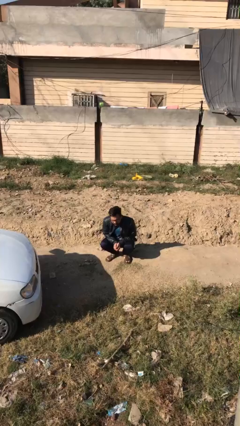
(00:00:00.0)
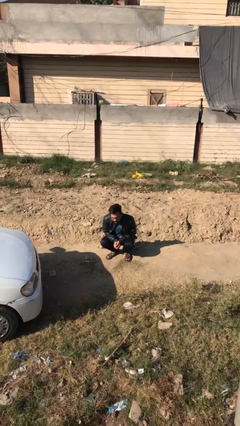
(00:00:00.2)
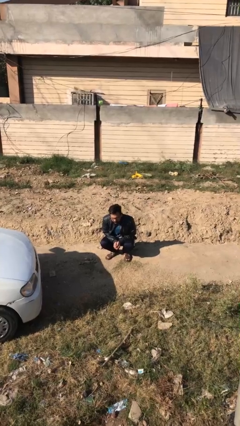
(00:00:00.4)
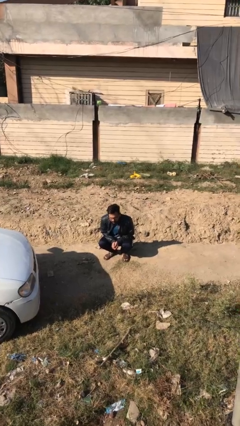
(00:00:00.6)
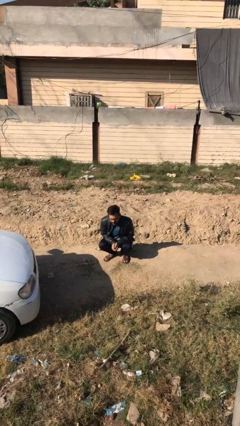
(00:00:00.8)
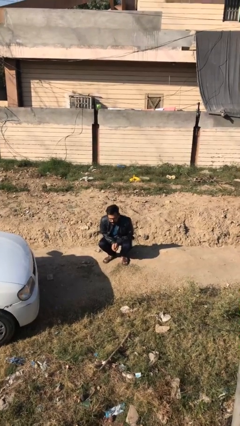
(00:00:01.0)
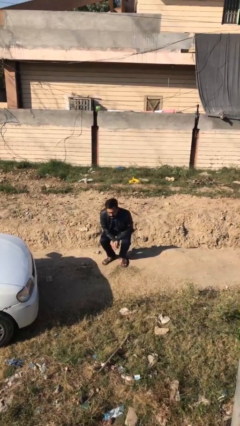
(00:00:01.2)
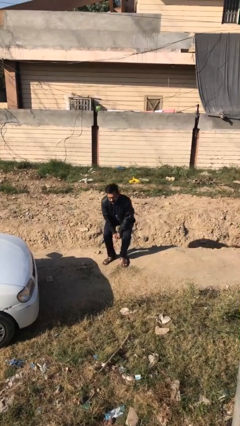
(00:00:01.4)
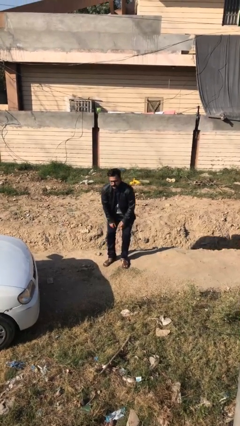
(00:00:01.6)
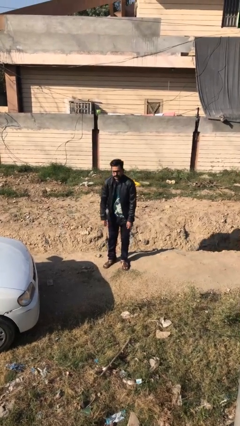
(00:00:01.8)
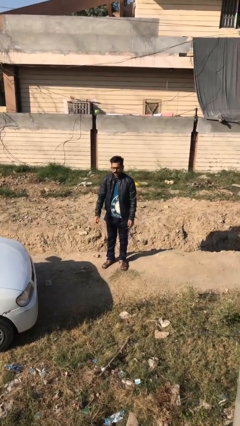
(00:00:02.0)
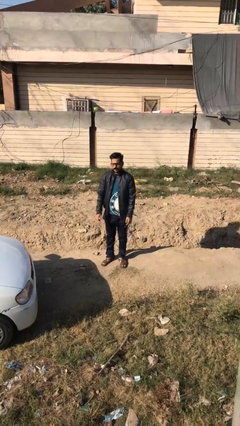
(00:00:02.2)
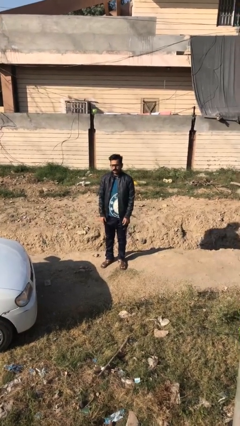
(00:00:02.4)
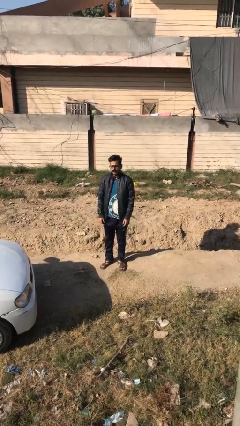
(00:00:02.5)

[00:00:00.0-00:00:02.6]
person stands up

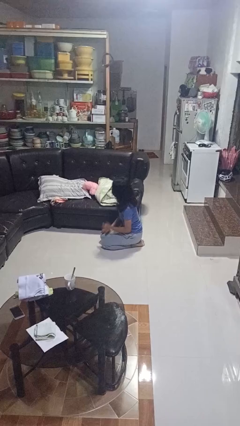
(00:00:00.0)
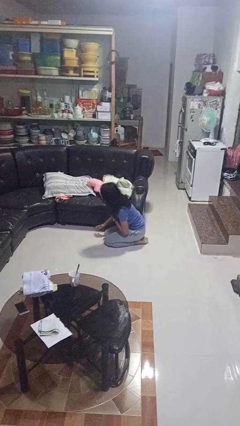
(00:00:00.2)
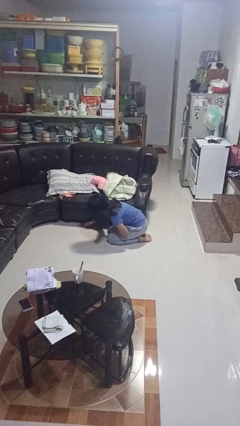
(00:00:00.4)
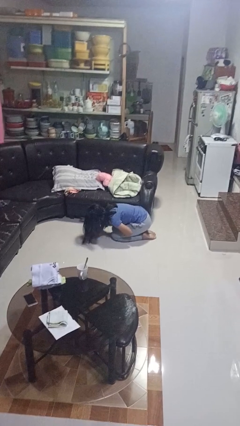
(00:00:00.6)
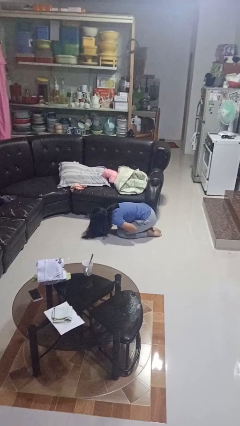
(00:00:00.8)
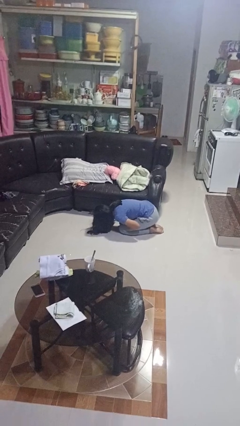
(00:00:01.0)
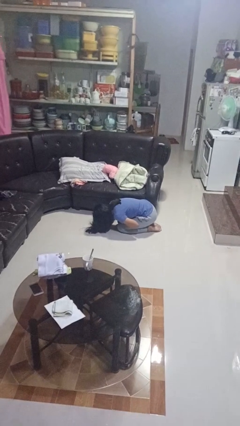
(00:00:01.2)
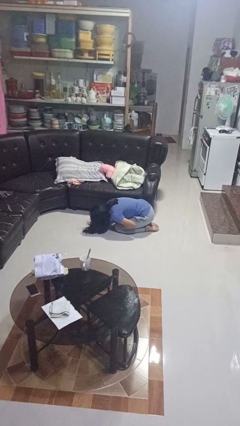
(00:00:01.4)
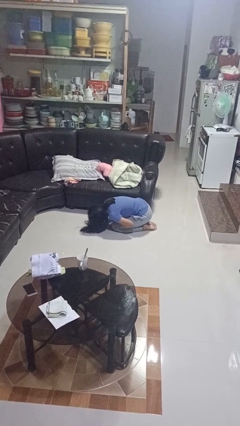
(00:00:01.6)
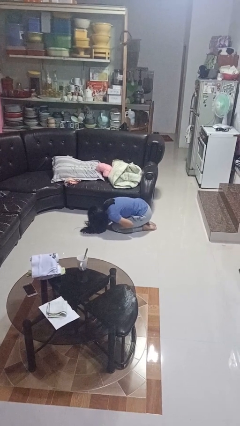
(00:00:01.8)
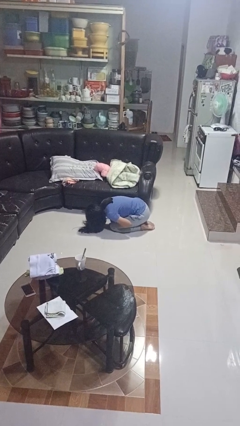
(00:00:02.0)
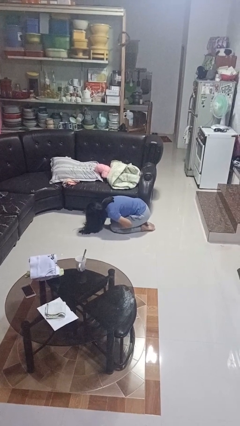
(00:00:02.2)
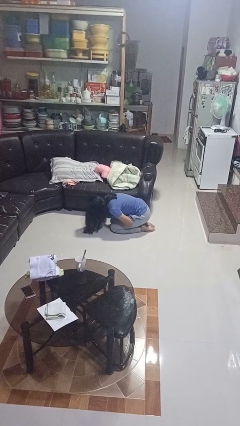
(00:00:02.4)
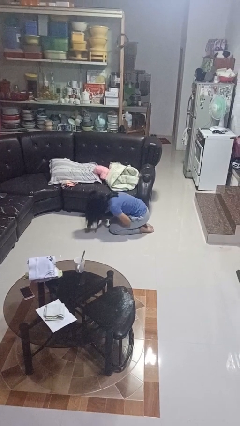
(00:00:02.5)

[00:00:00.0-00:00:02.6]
person searches under couch

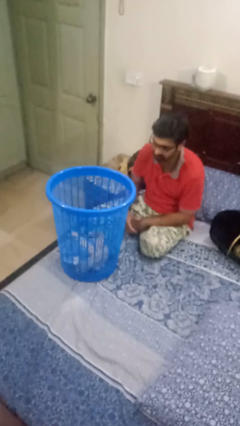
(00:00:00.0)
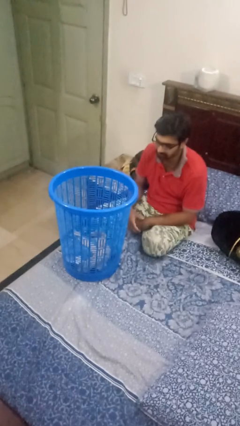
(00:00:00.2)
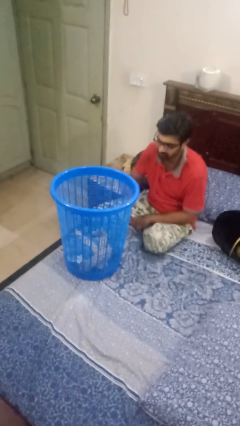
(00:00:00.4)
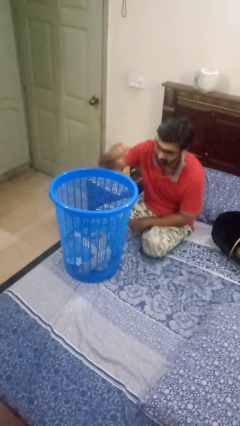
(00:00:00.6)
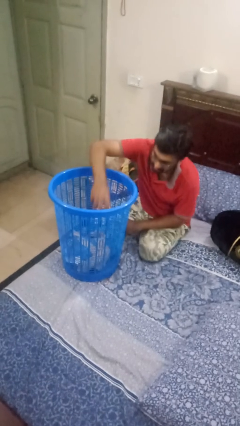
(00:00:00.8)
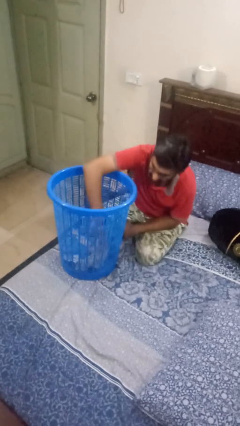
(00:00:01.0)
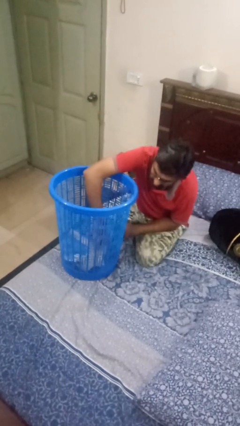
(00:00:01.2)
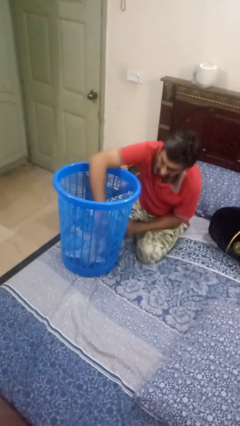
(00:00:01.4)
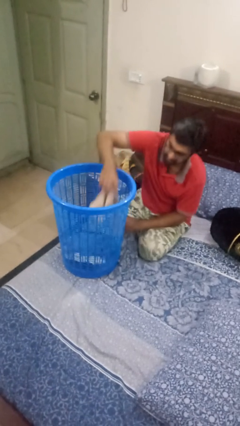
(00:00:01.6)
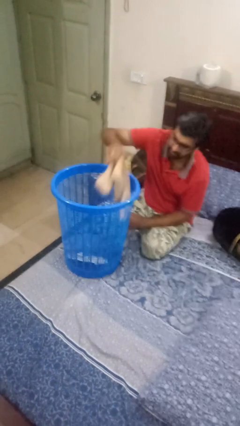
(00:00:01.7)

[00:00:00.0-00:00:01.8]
person takes object from basket

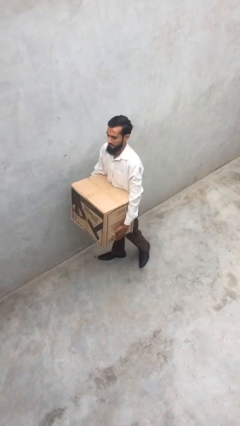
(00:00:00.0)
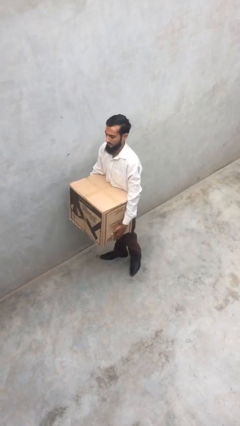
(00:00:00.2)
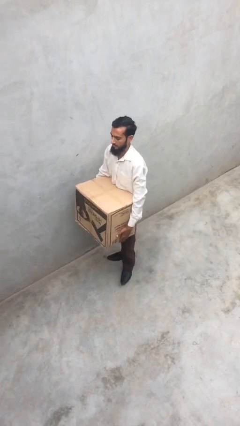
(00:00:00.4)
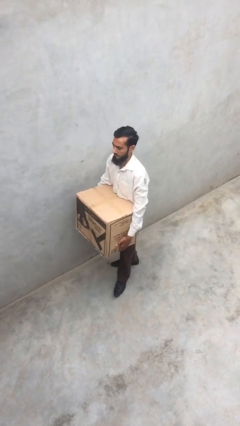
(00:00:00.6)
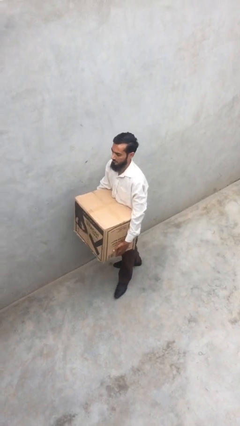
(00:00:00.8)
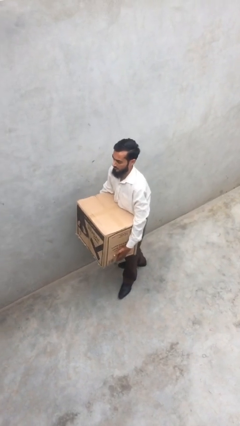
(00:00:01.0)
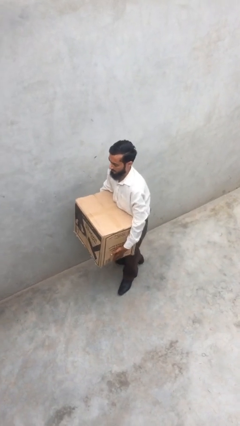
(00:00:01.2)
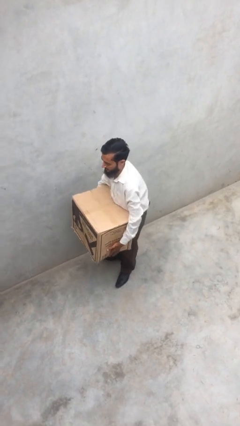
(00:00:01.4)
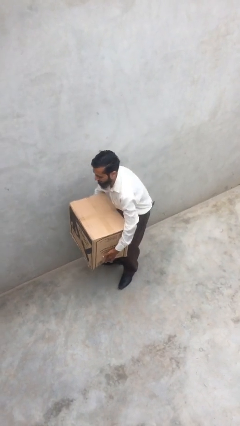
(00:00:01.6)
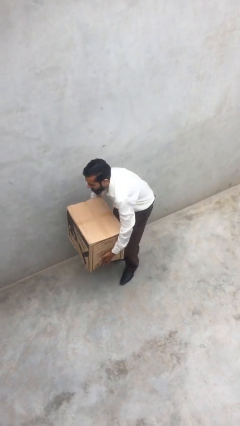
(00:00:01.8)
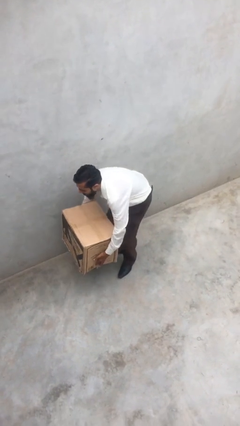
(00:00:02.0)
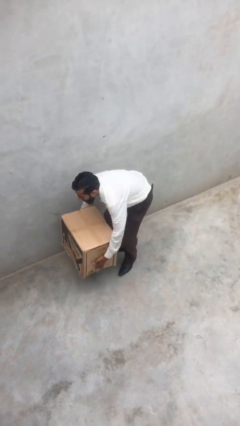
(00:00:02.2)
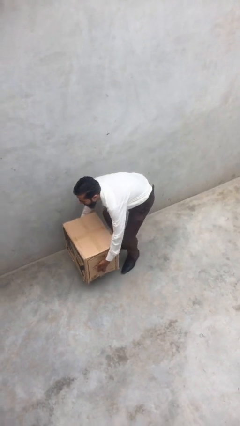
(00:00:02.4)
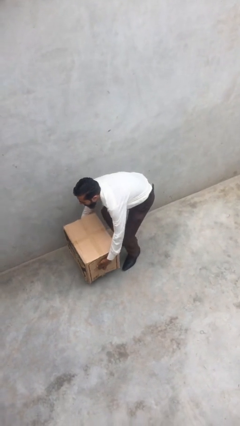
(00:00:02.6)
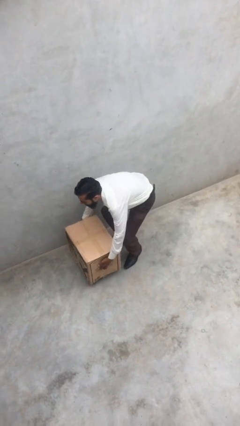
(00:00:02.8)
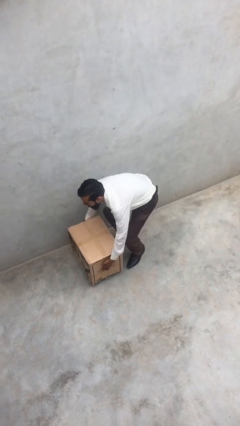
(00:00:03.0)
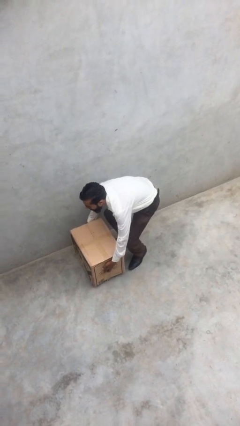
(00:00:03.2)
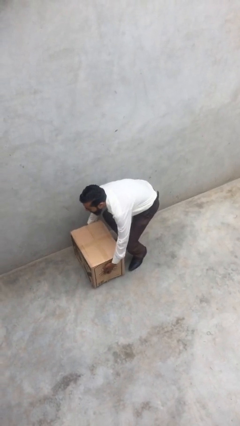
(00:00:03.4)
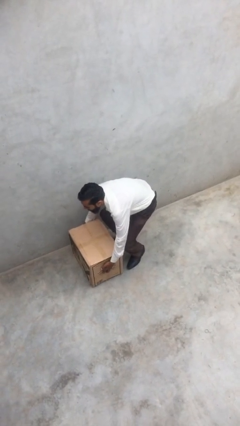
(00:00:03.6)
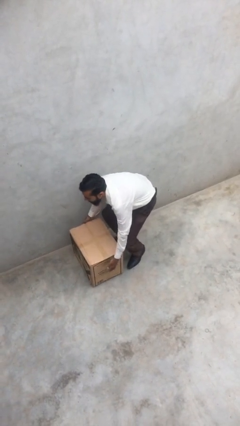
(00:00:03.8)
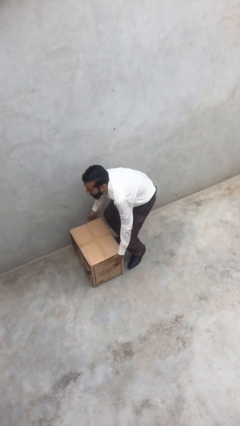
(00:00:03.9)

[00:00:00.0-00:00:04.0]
person puts down object on floor

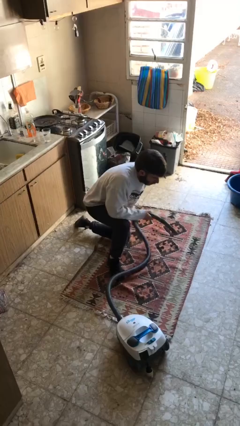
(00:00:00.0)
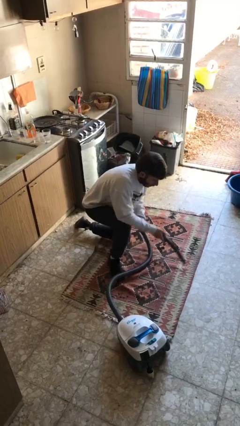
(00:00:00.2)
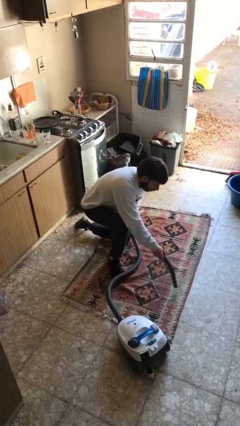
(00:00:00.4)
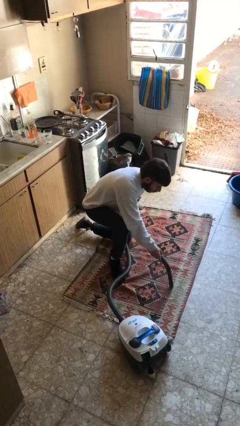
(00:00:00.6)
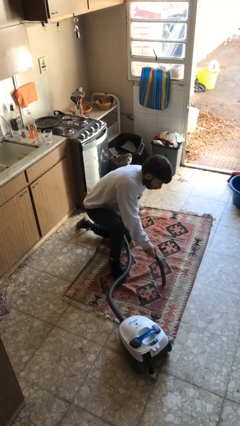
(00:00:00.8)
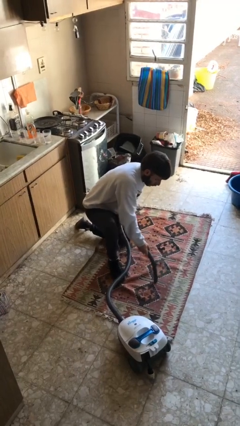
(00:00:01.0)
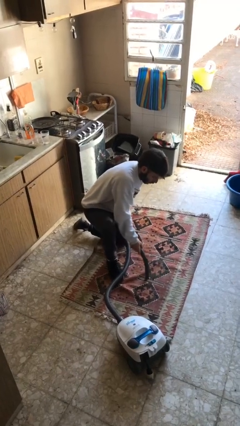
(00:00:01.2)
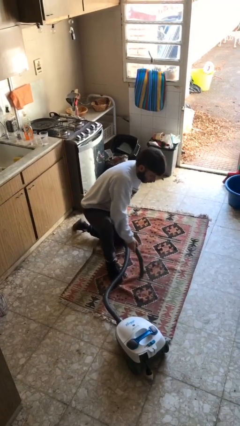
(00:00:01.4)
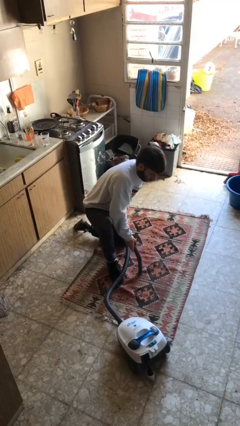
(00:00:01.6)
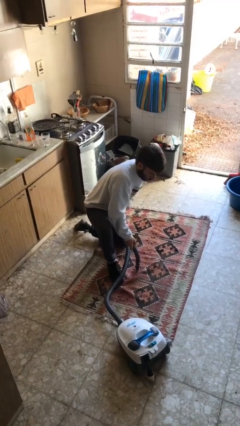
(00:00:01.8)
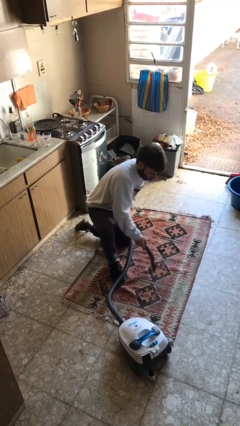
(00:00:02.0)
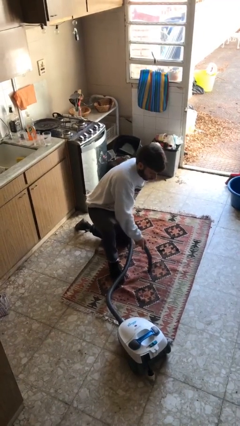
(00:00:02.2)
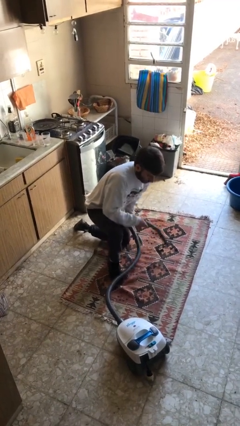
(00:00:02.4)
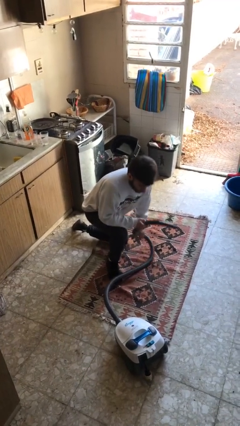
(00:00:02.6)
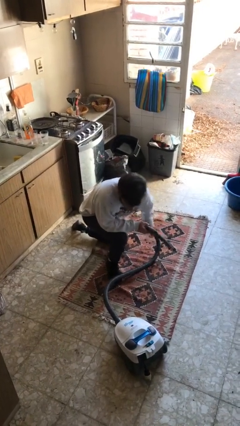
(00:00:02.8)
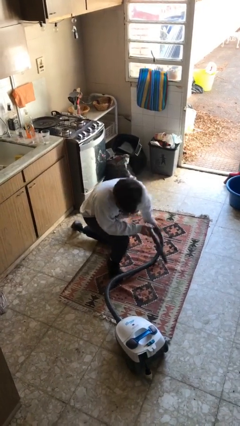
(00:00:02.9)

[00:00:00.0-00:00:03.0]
person vacuums carpet

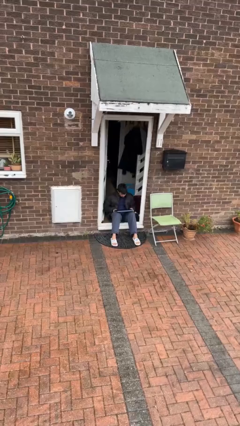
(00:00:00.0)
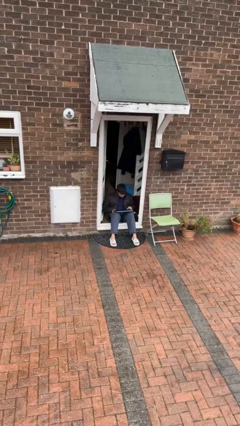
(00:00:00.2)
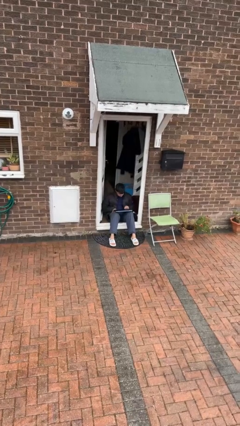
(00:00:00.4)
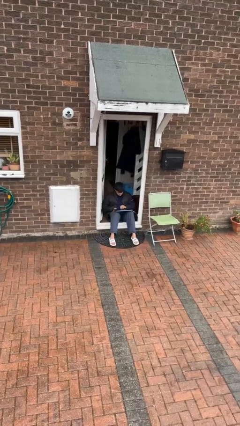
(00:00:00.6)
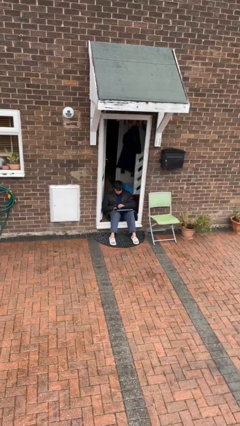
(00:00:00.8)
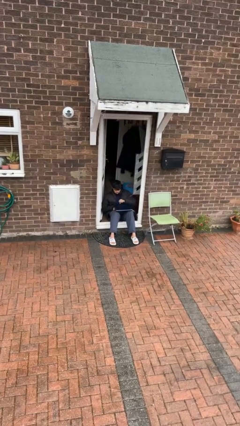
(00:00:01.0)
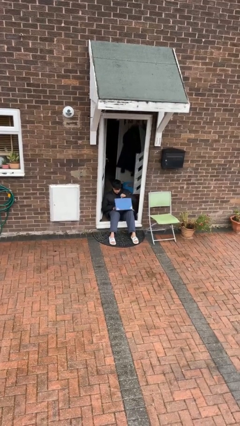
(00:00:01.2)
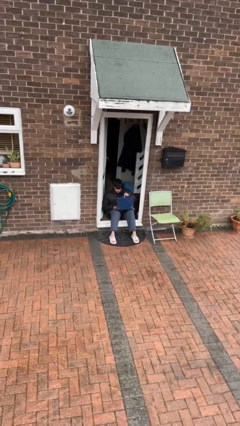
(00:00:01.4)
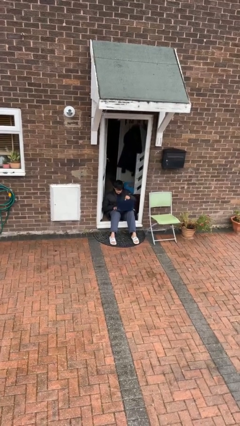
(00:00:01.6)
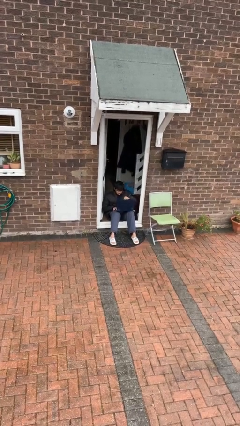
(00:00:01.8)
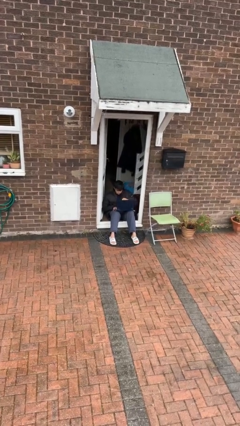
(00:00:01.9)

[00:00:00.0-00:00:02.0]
person opens laptop

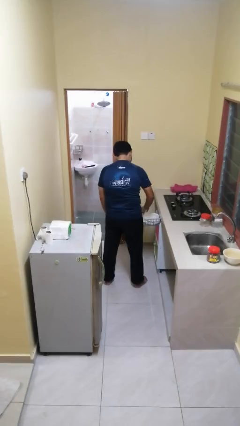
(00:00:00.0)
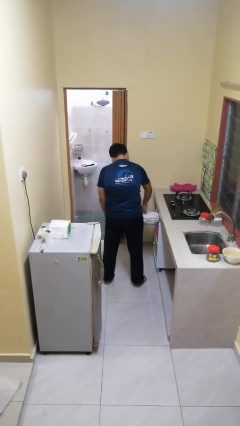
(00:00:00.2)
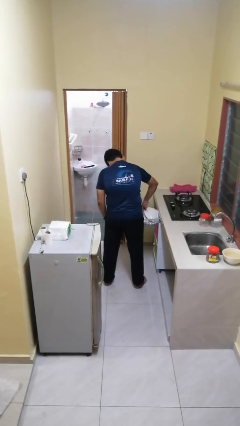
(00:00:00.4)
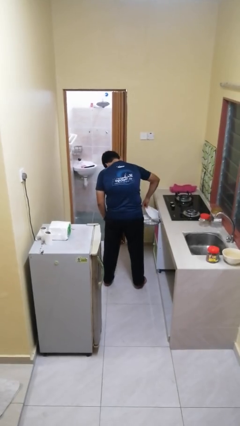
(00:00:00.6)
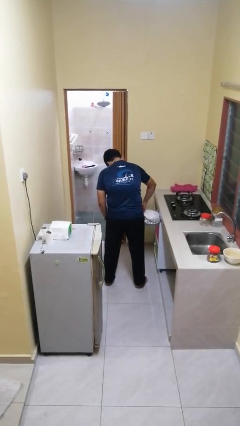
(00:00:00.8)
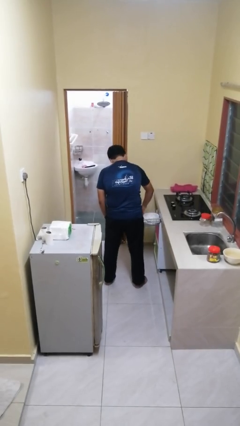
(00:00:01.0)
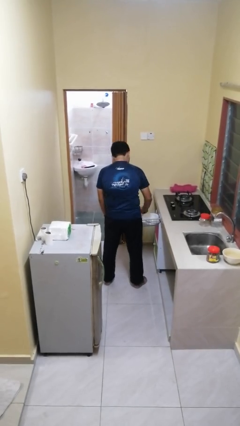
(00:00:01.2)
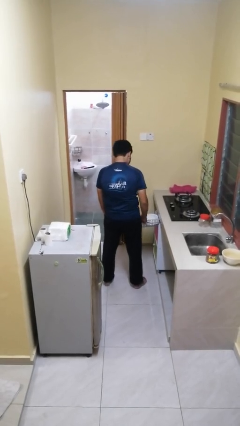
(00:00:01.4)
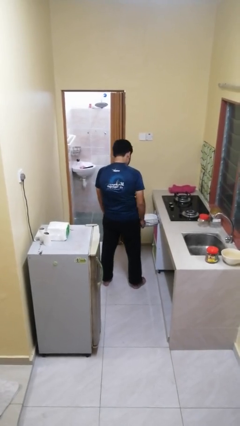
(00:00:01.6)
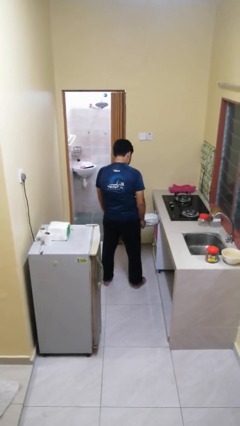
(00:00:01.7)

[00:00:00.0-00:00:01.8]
person searches in kitchen drawer
